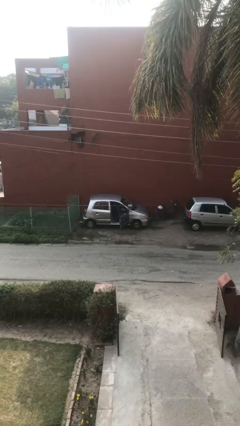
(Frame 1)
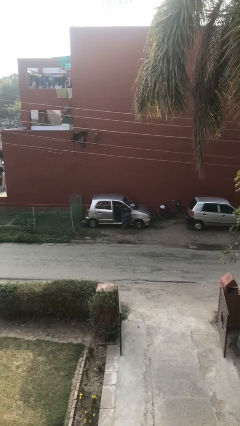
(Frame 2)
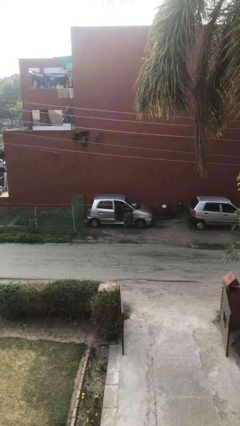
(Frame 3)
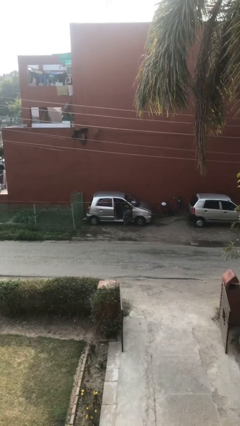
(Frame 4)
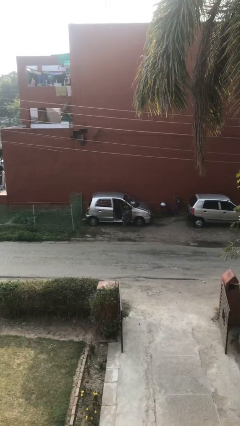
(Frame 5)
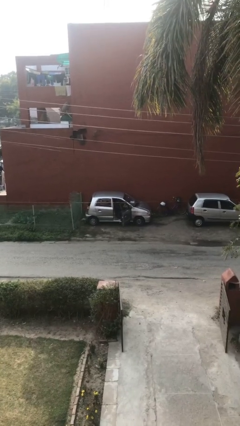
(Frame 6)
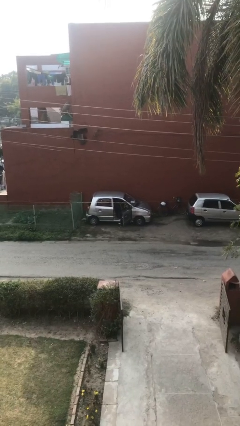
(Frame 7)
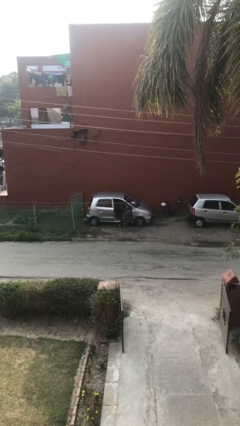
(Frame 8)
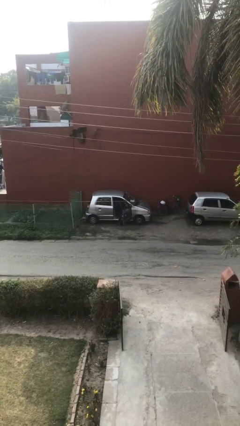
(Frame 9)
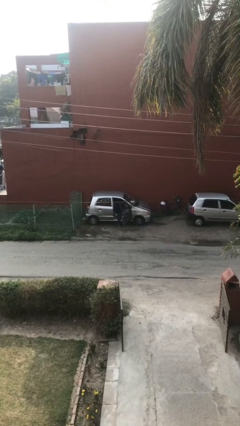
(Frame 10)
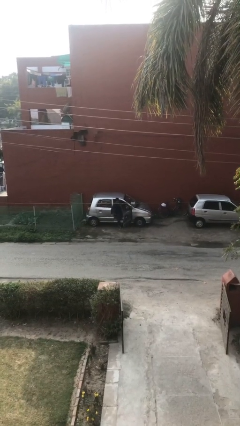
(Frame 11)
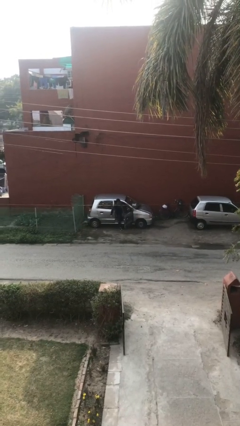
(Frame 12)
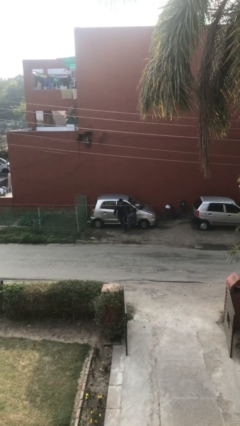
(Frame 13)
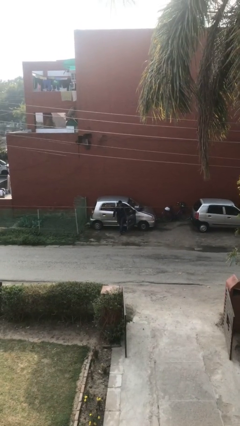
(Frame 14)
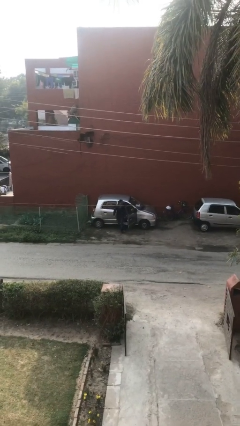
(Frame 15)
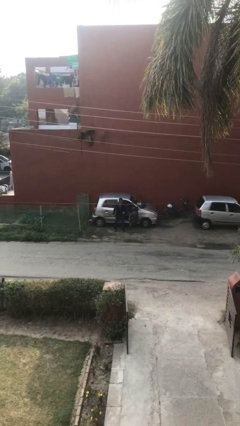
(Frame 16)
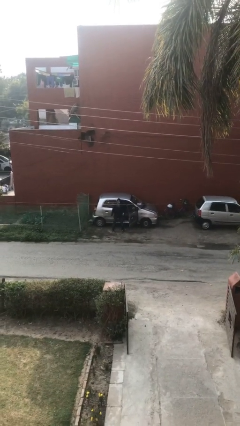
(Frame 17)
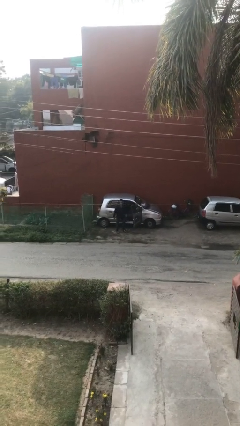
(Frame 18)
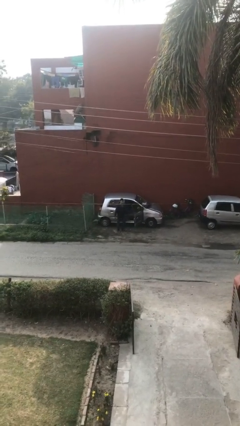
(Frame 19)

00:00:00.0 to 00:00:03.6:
person exits car

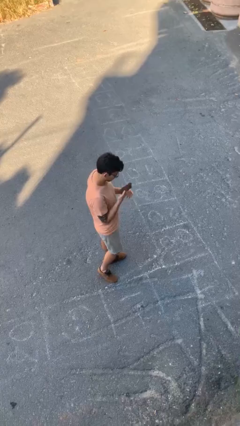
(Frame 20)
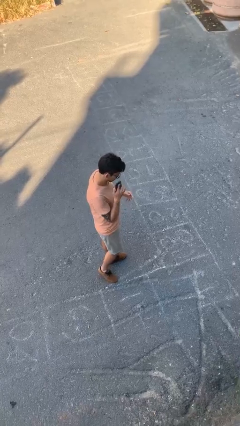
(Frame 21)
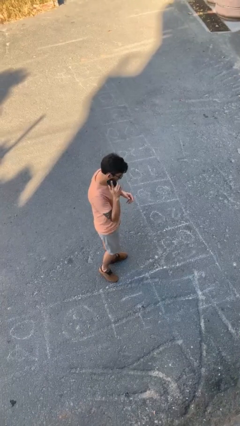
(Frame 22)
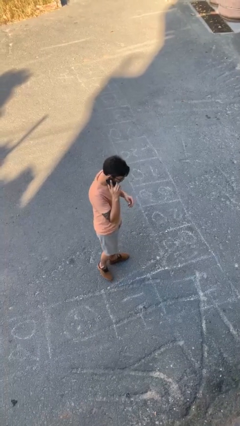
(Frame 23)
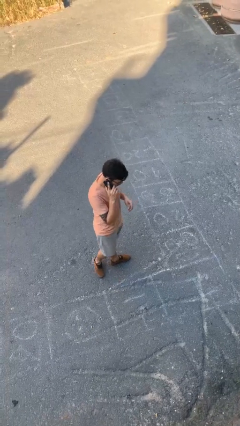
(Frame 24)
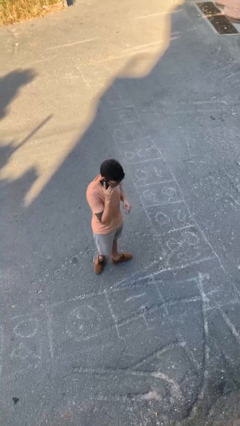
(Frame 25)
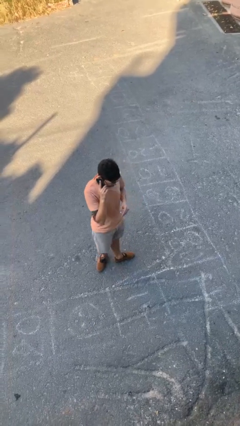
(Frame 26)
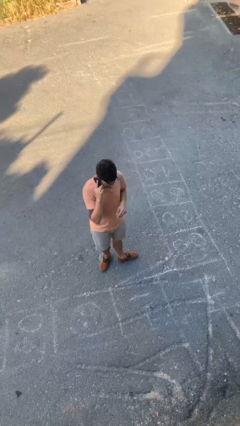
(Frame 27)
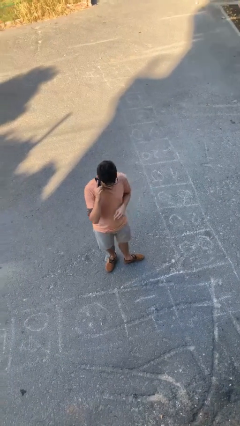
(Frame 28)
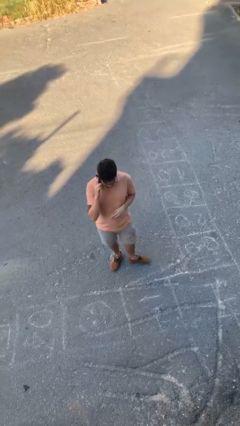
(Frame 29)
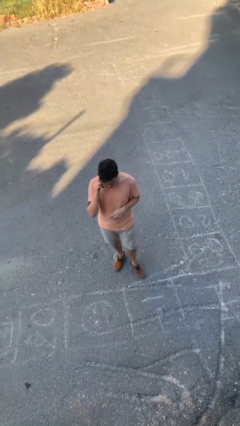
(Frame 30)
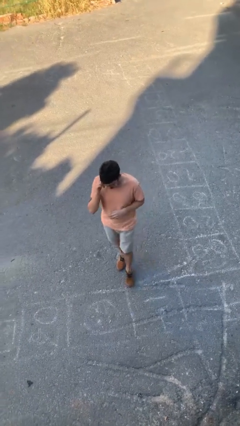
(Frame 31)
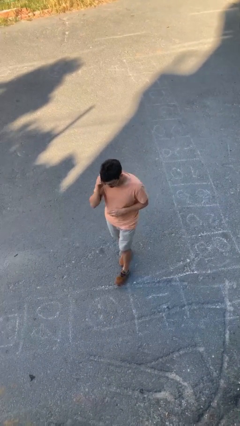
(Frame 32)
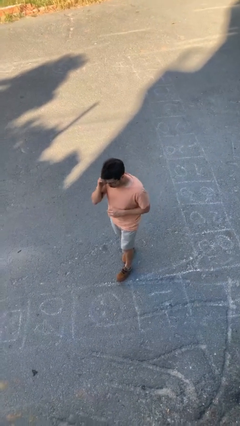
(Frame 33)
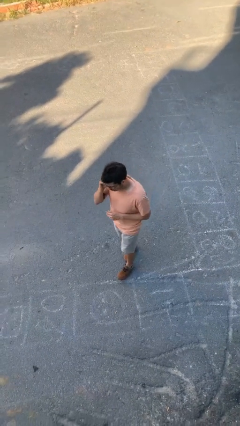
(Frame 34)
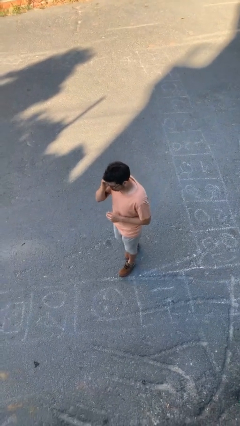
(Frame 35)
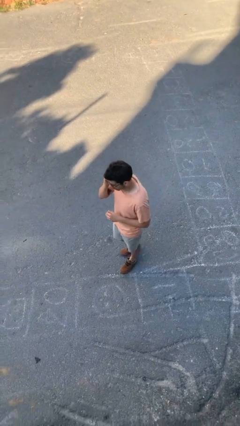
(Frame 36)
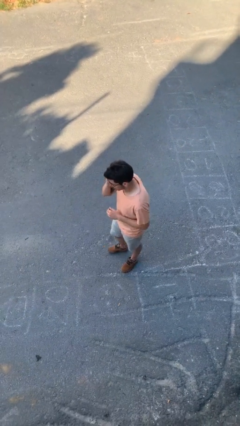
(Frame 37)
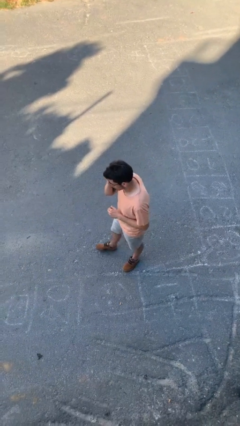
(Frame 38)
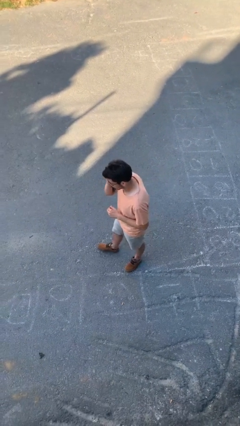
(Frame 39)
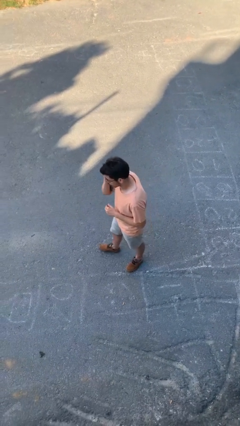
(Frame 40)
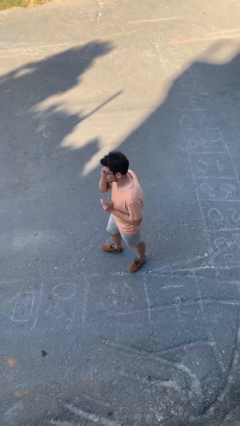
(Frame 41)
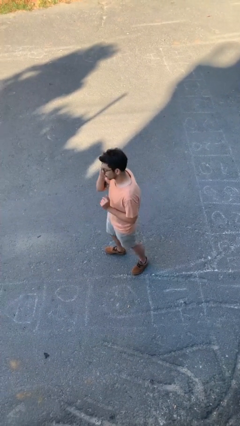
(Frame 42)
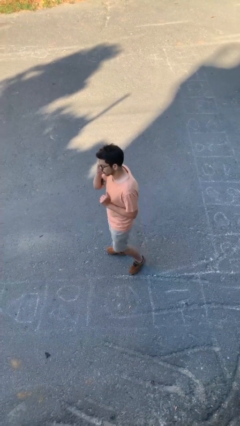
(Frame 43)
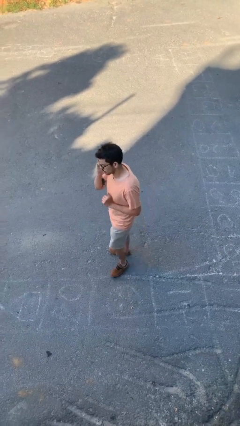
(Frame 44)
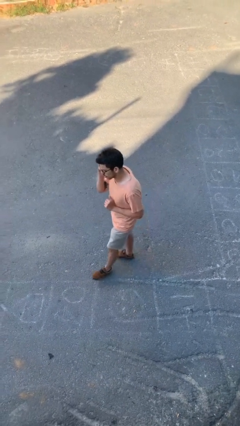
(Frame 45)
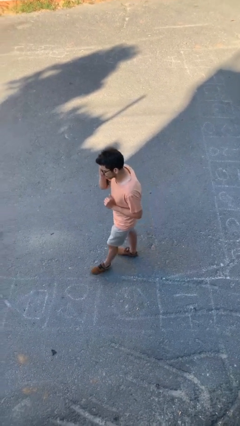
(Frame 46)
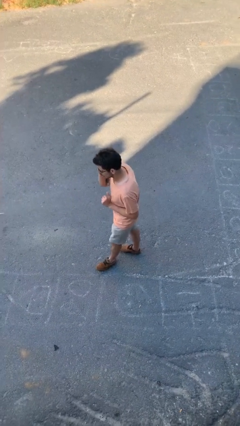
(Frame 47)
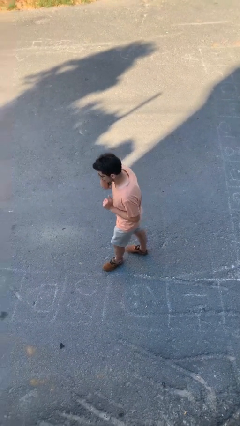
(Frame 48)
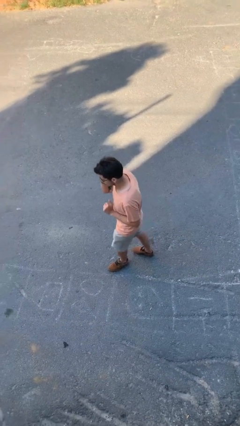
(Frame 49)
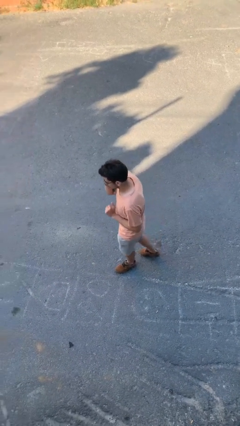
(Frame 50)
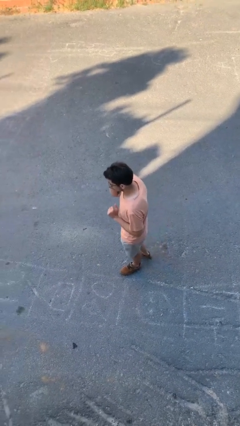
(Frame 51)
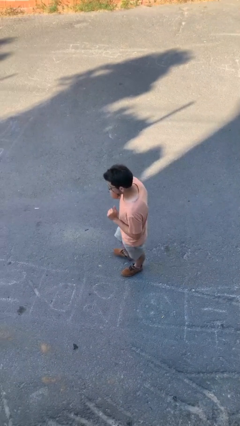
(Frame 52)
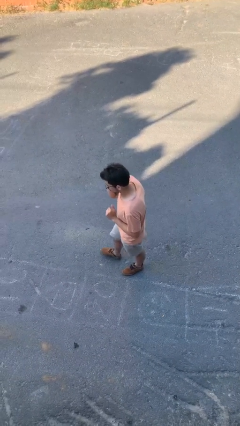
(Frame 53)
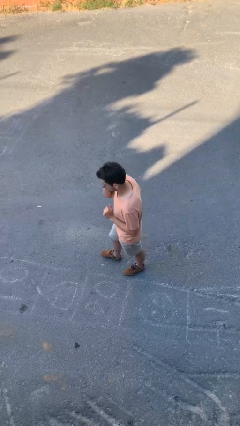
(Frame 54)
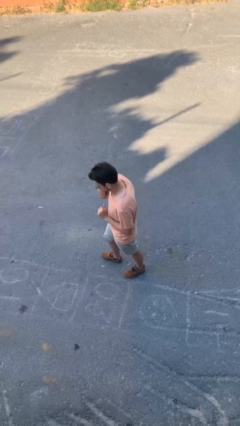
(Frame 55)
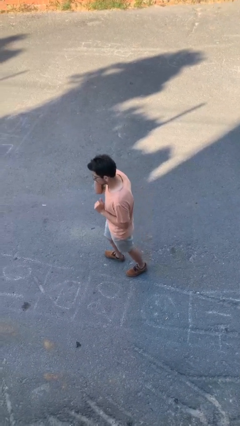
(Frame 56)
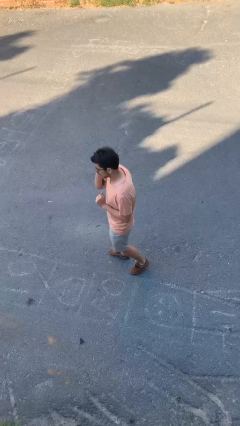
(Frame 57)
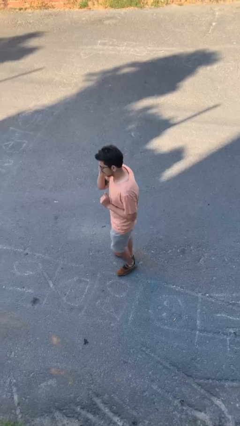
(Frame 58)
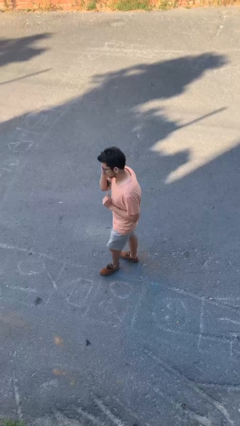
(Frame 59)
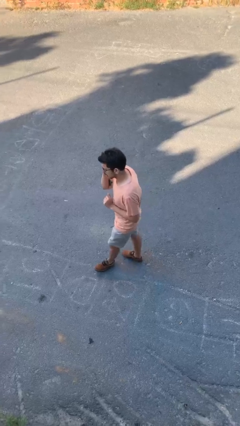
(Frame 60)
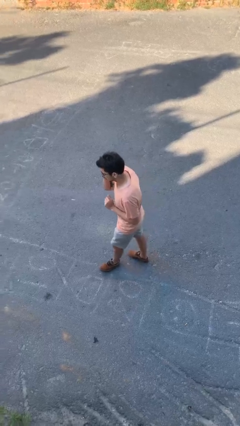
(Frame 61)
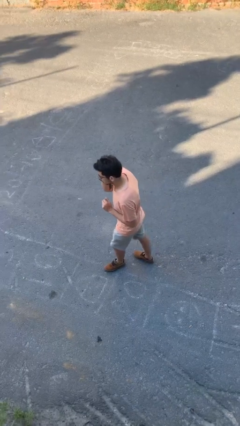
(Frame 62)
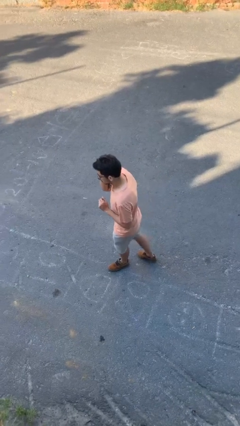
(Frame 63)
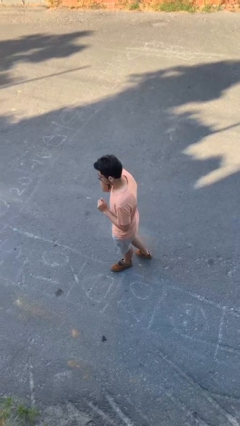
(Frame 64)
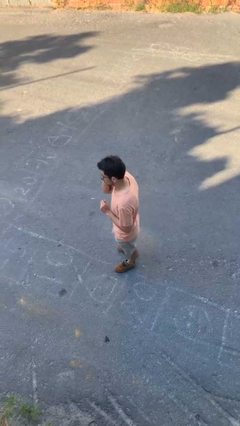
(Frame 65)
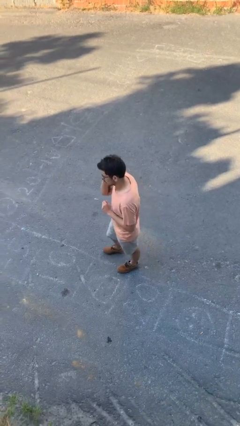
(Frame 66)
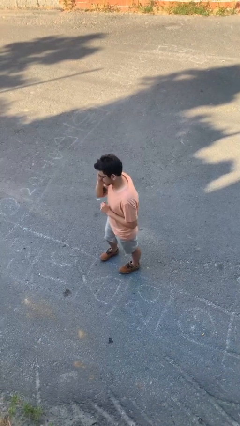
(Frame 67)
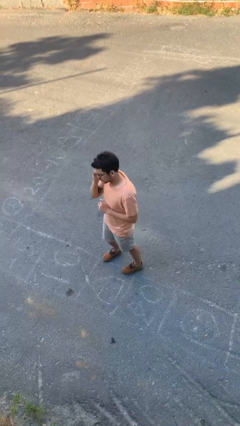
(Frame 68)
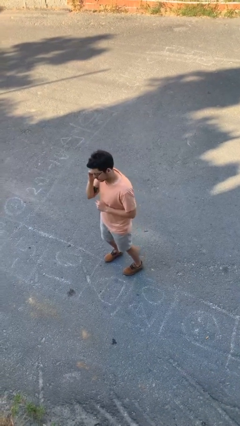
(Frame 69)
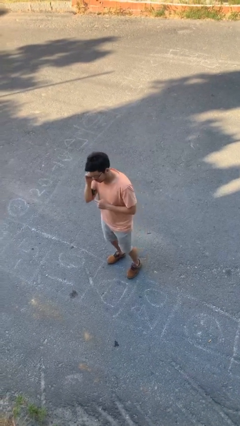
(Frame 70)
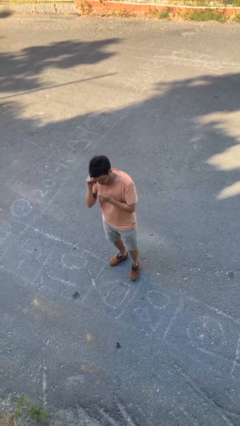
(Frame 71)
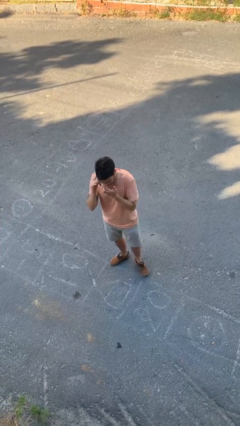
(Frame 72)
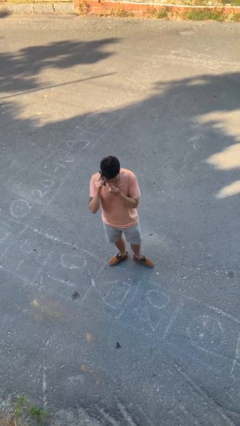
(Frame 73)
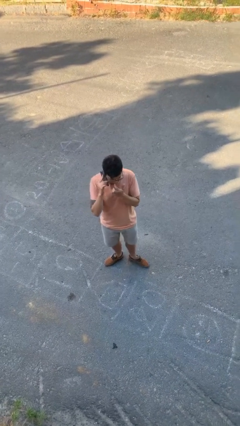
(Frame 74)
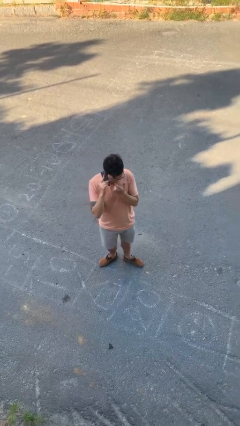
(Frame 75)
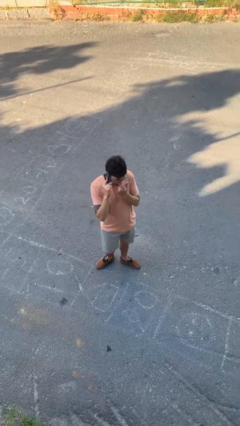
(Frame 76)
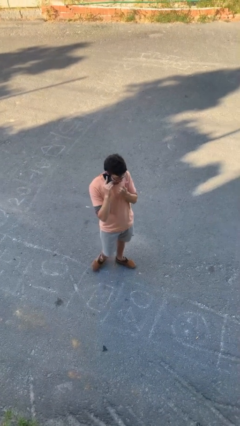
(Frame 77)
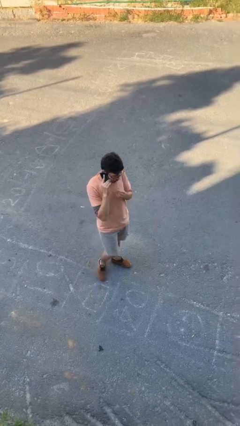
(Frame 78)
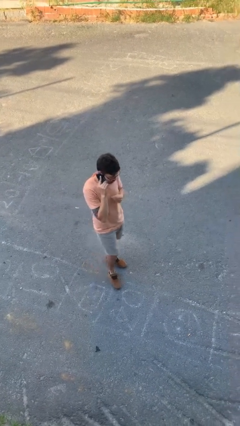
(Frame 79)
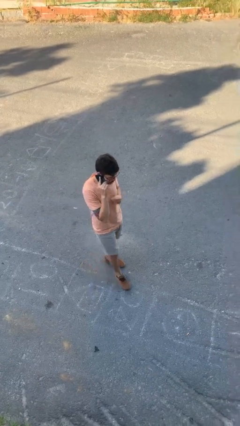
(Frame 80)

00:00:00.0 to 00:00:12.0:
person talks on phone

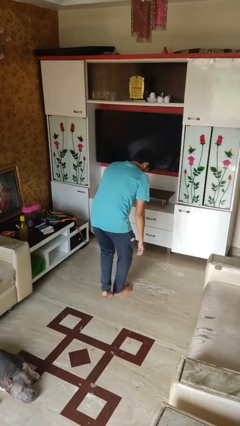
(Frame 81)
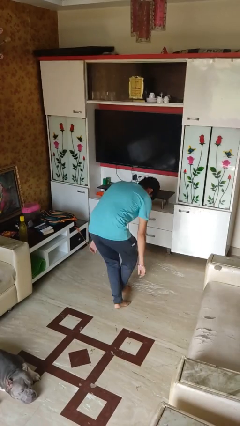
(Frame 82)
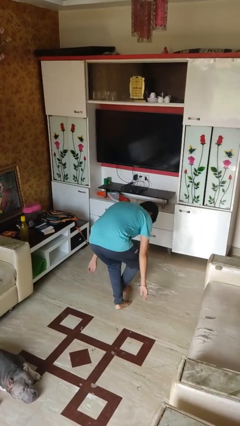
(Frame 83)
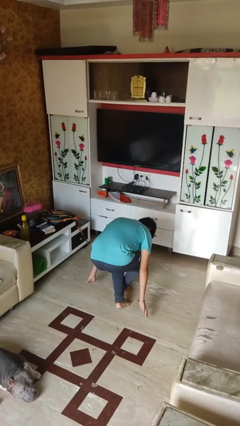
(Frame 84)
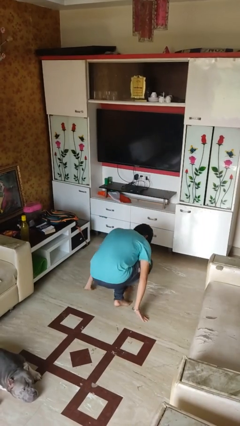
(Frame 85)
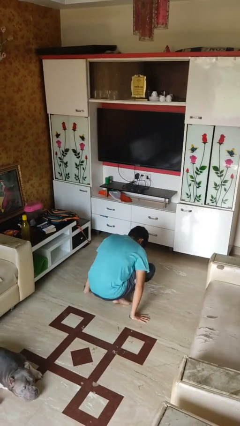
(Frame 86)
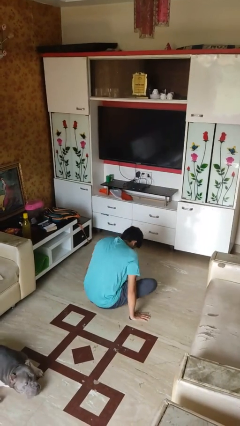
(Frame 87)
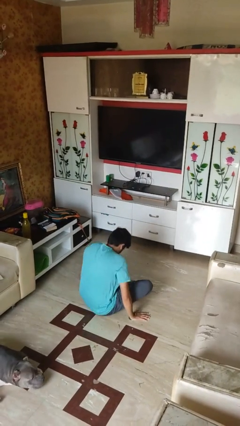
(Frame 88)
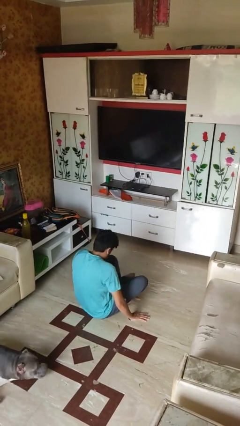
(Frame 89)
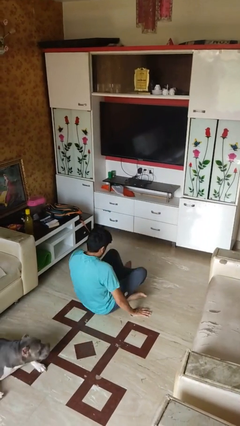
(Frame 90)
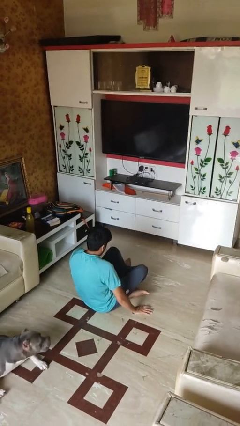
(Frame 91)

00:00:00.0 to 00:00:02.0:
person sits crisscross

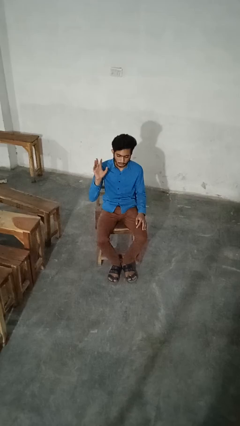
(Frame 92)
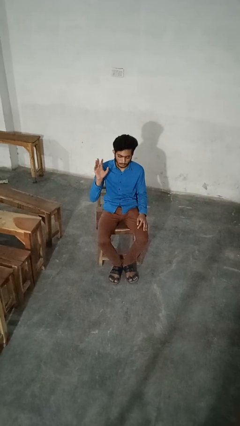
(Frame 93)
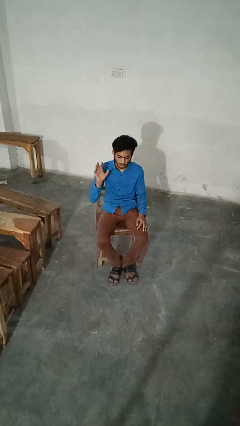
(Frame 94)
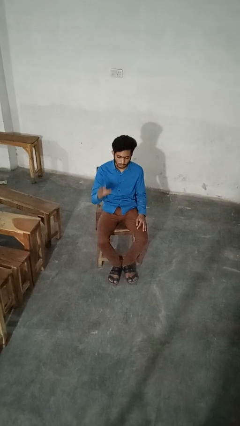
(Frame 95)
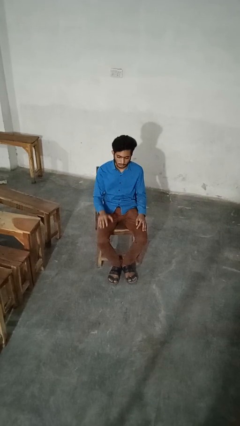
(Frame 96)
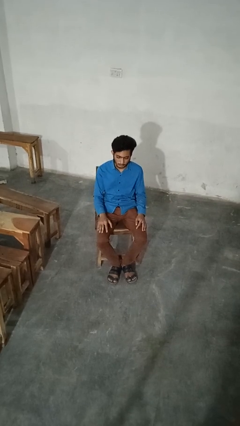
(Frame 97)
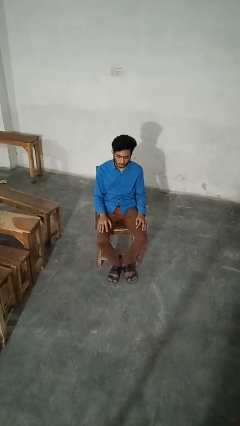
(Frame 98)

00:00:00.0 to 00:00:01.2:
person gestures lower hand
